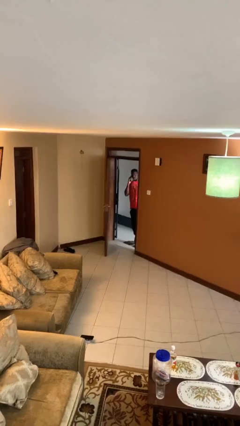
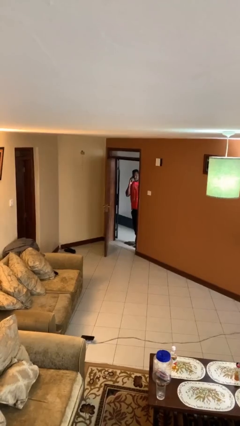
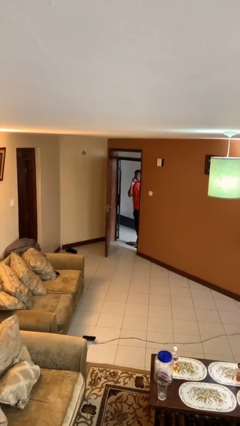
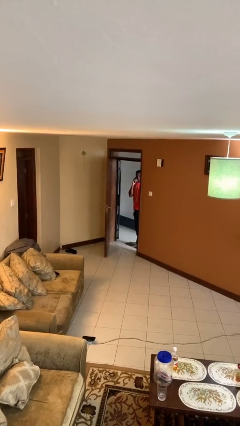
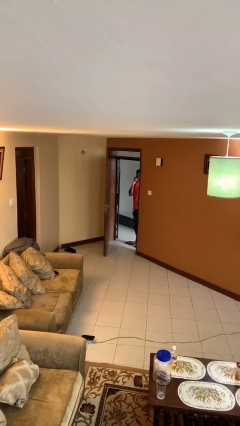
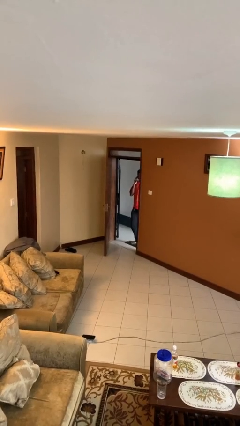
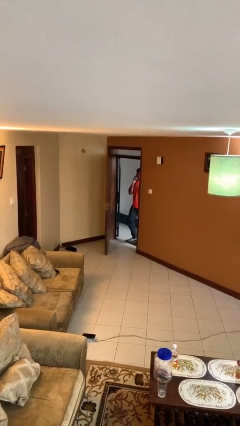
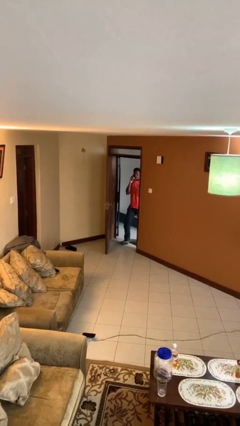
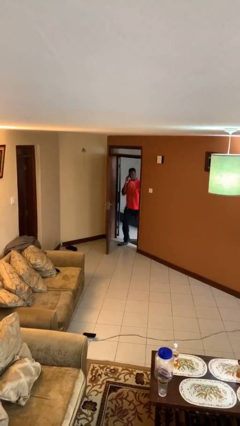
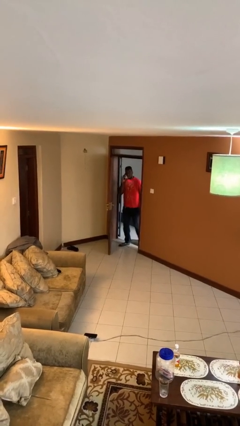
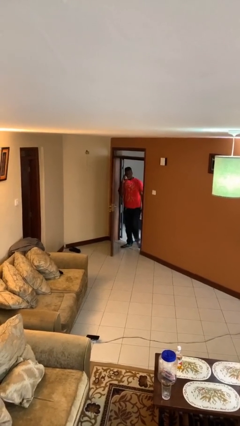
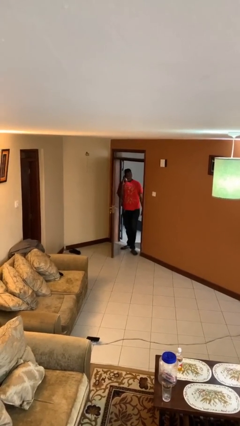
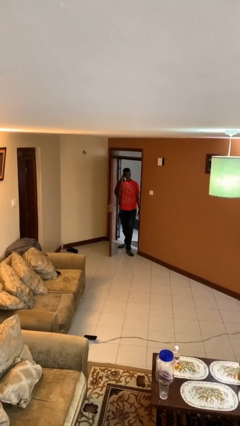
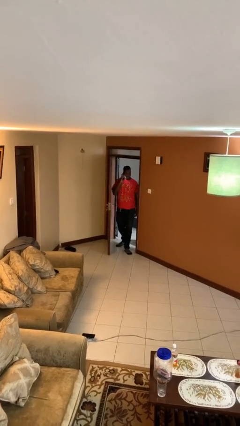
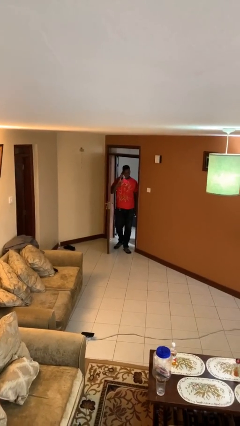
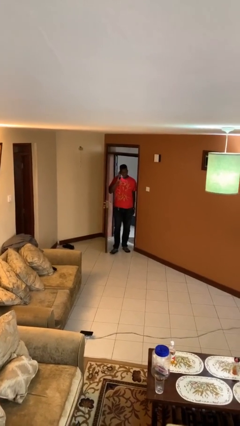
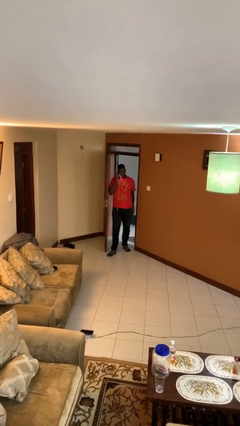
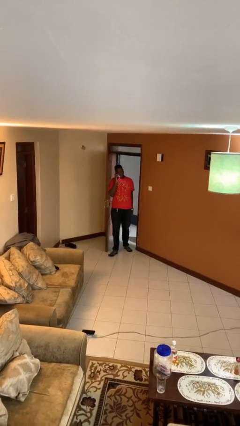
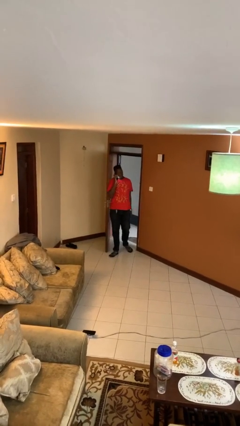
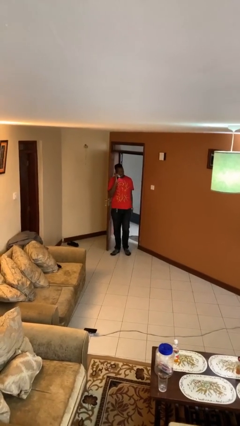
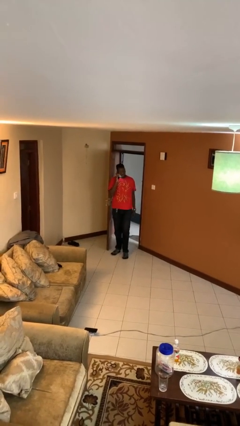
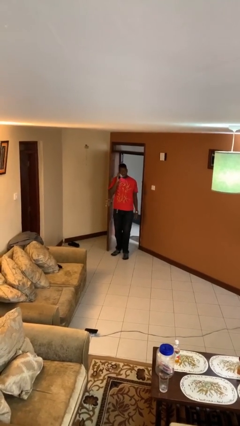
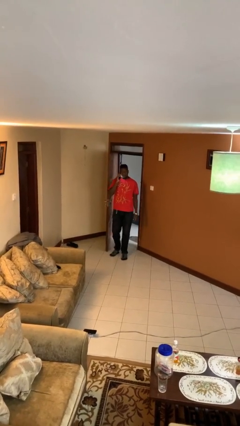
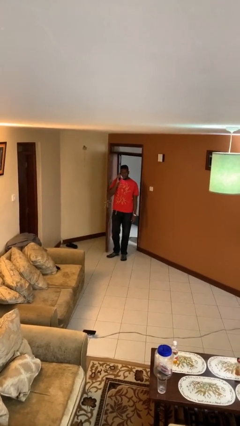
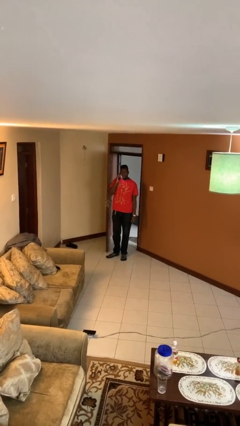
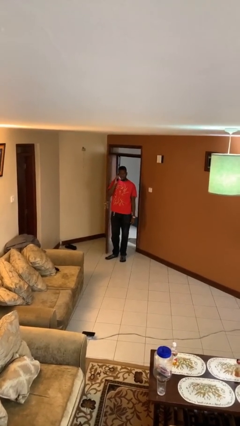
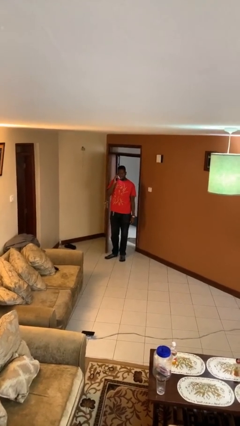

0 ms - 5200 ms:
person enters scene through structure

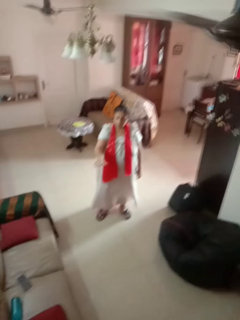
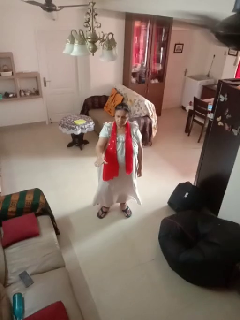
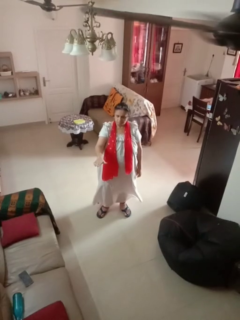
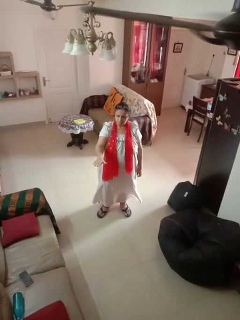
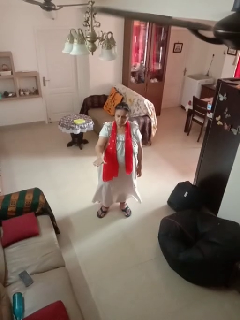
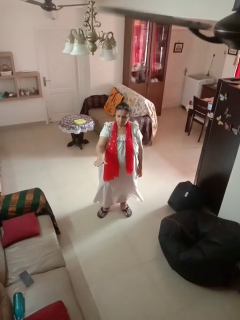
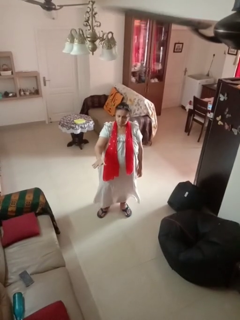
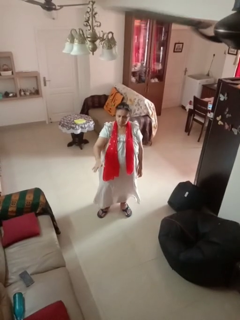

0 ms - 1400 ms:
person gestures swipe down

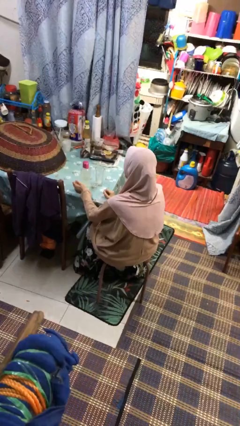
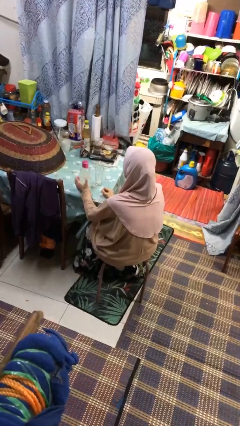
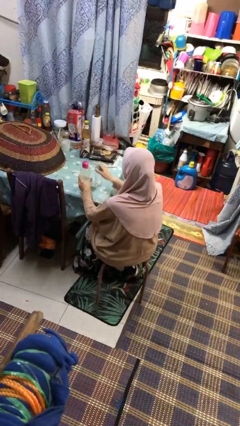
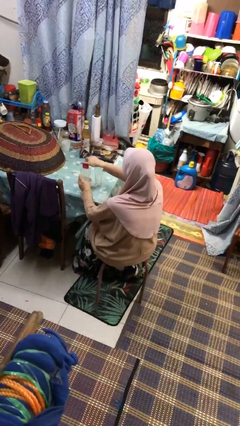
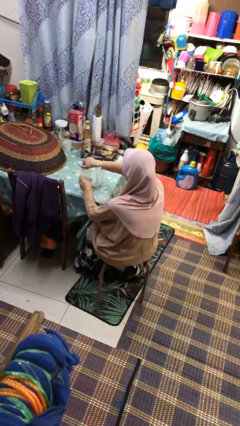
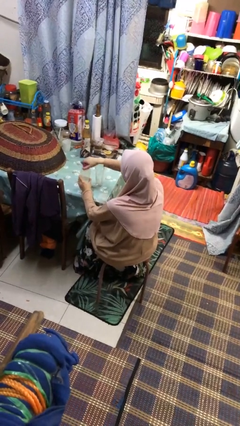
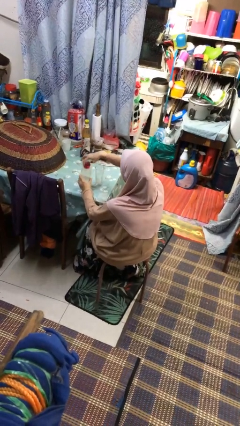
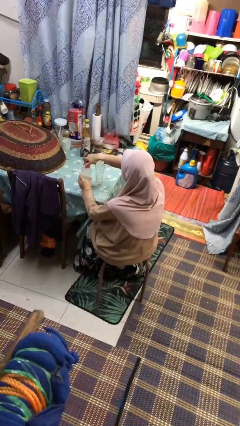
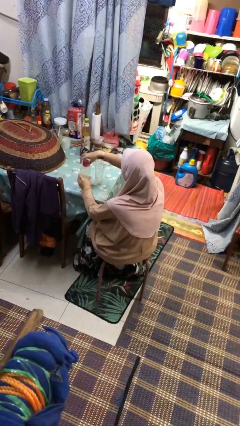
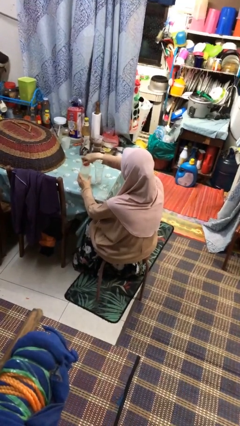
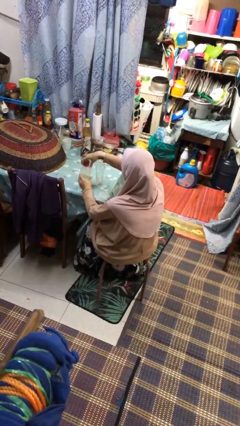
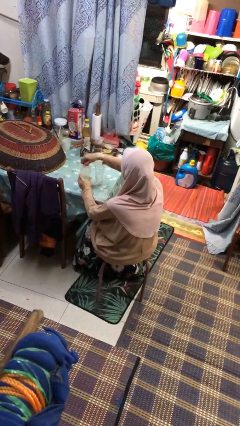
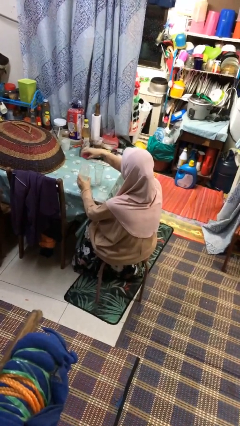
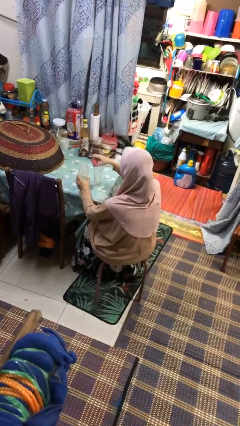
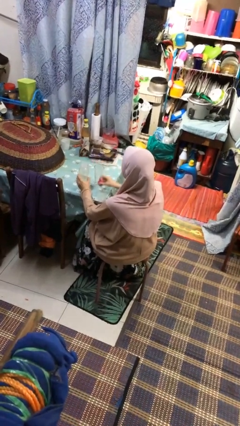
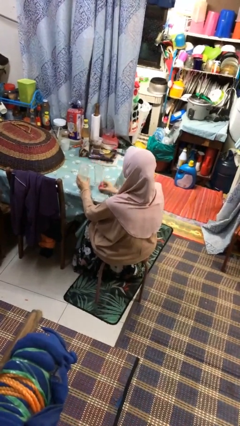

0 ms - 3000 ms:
person unscrews lid from bottle

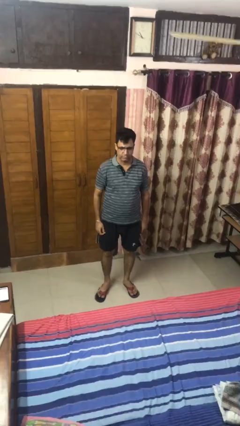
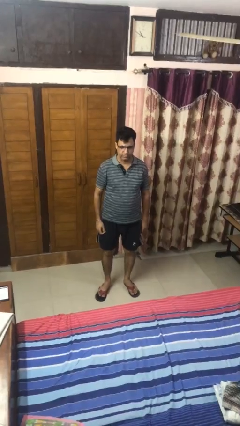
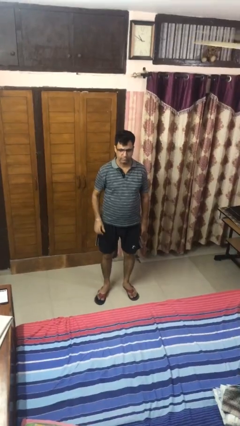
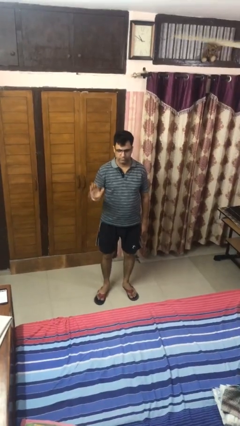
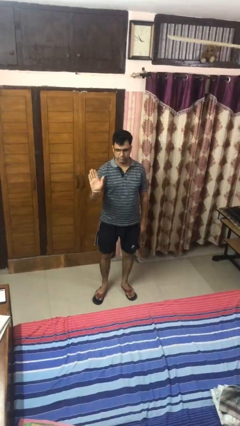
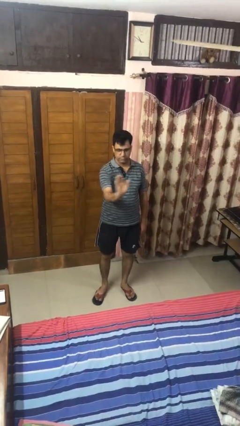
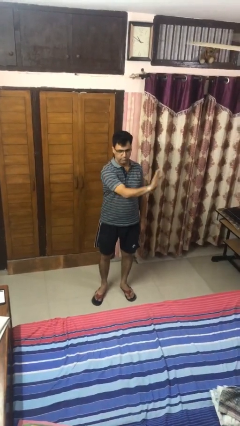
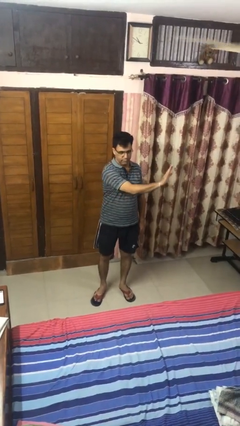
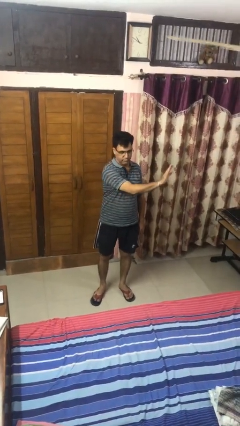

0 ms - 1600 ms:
person gestures swipe left

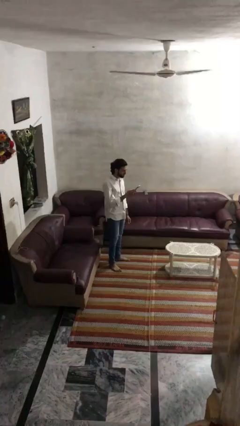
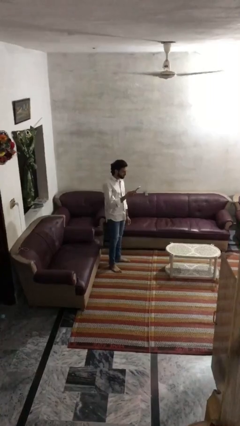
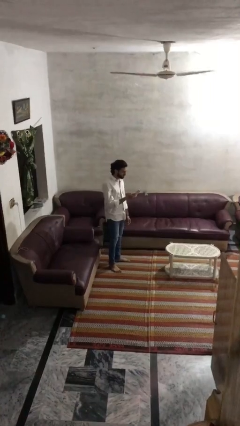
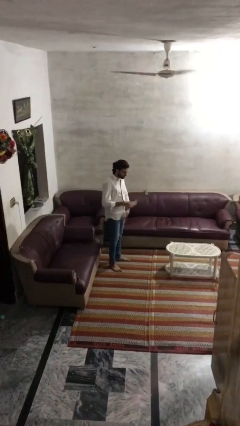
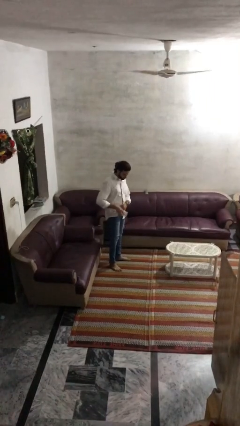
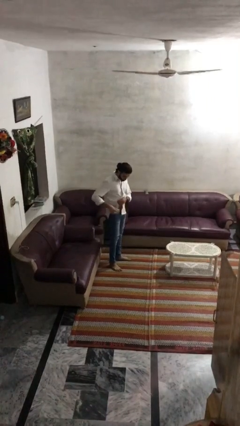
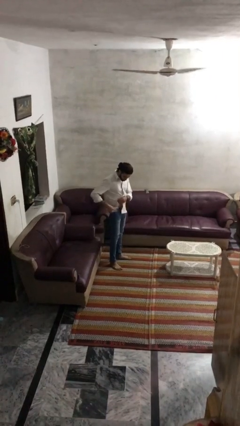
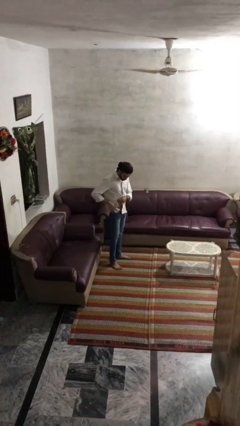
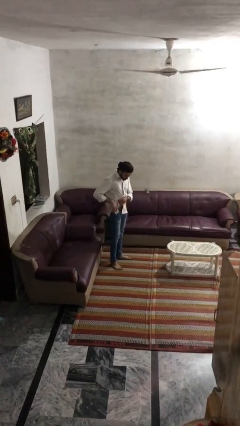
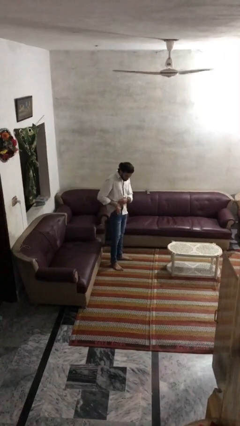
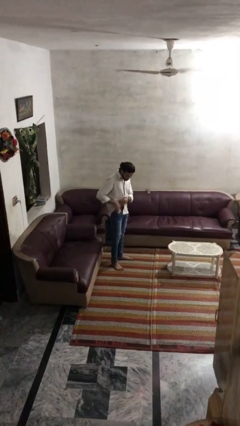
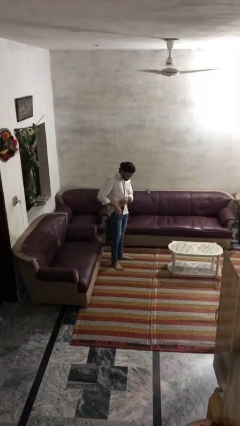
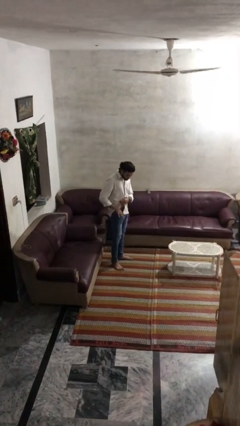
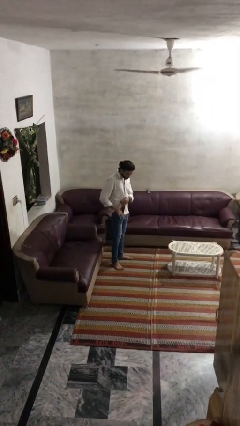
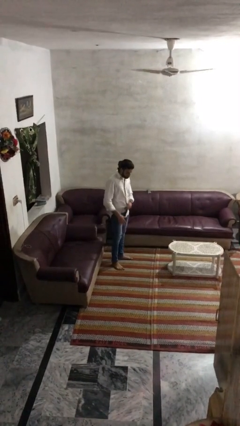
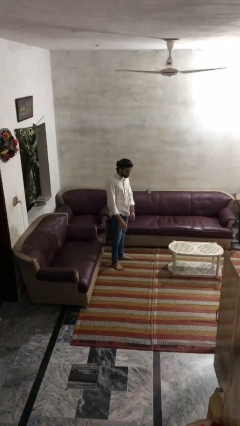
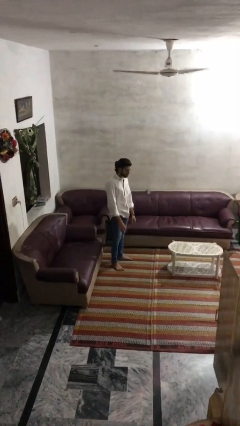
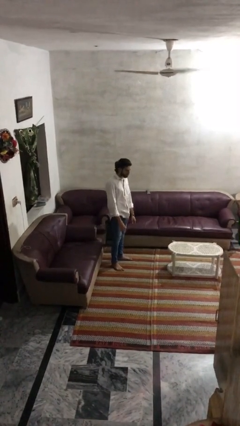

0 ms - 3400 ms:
person puts phone into pocket

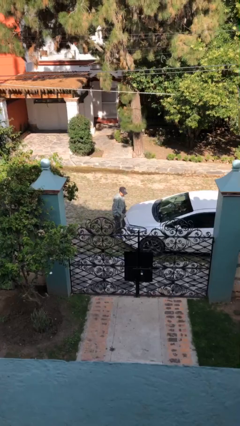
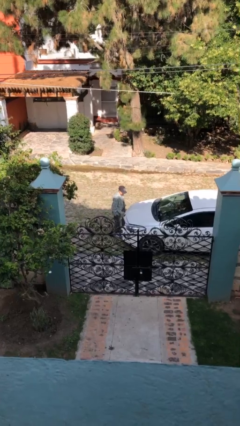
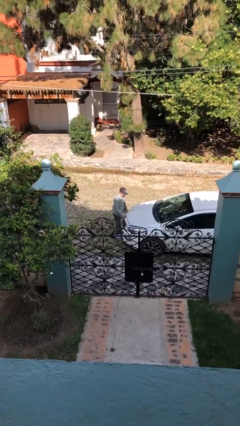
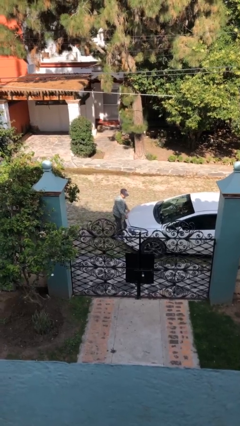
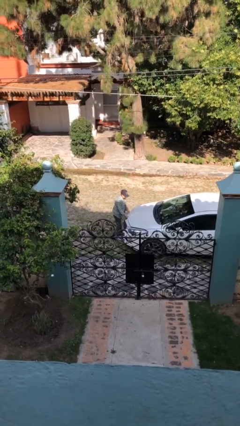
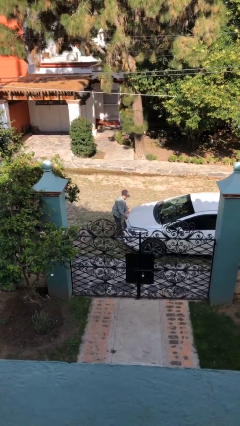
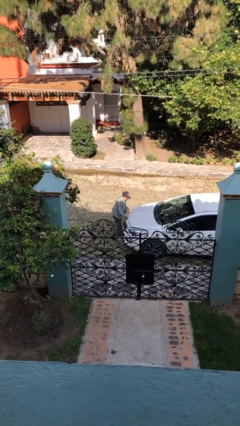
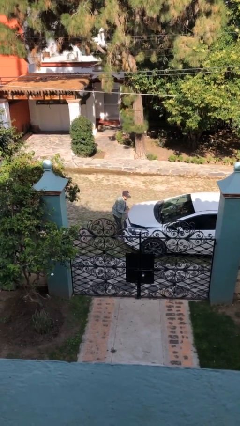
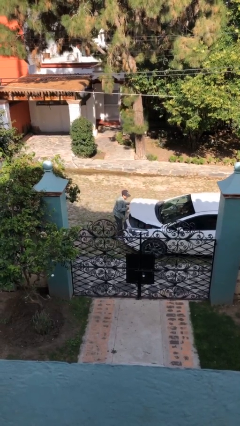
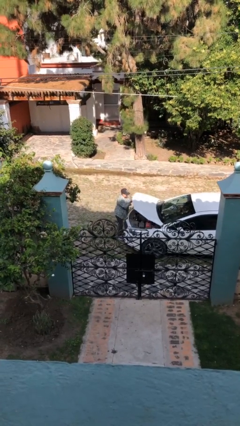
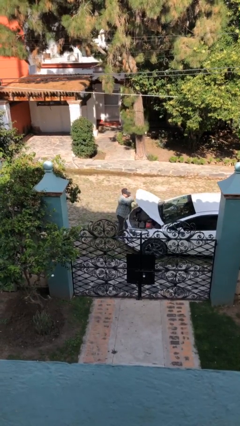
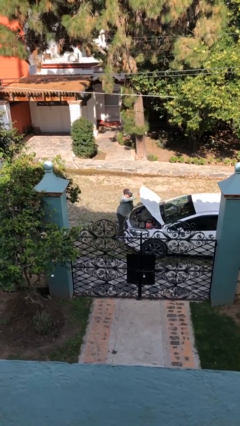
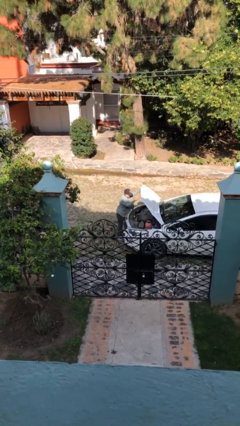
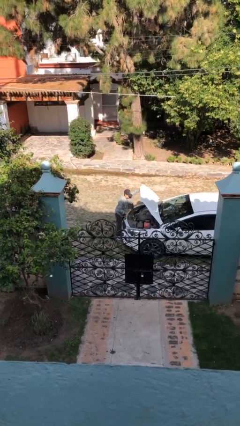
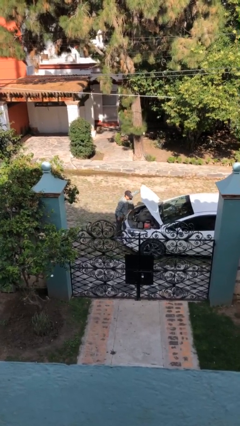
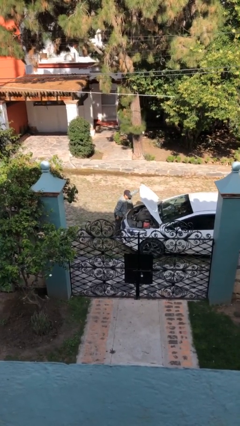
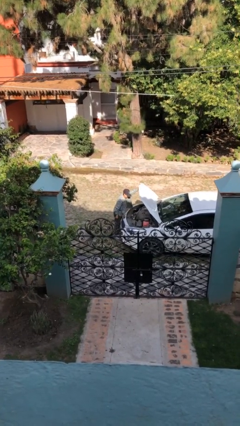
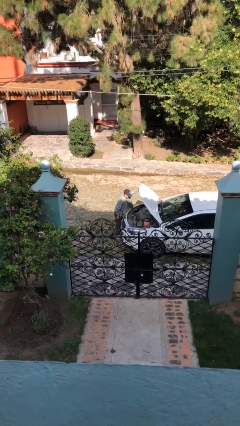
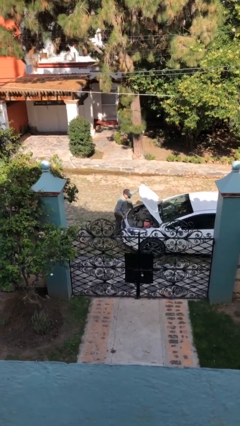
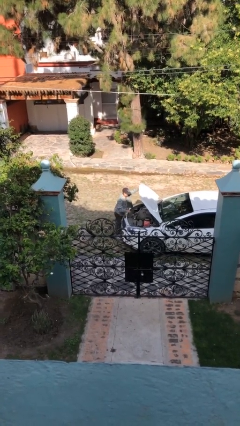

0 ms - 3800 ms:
person opens car hood
